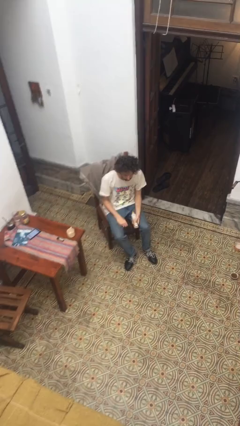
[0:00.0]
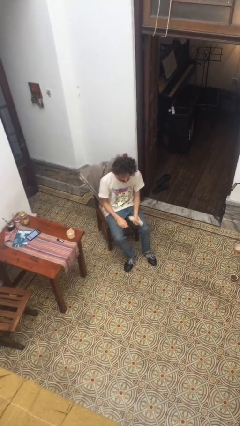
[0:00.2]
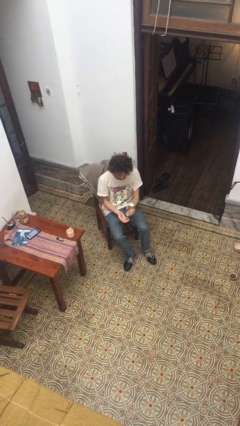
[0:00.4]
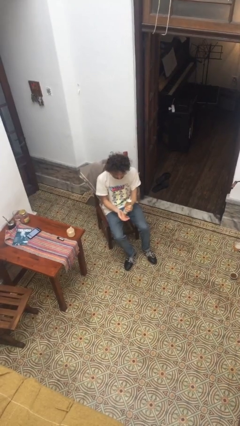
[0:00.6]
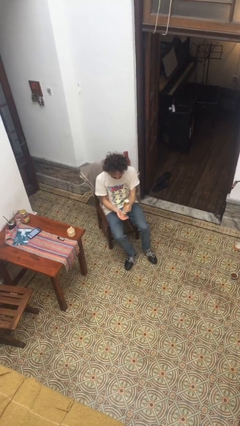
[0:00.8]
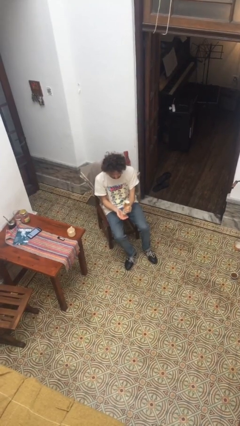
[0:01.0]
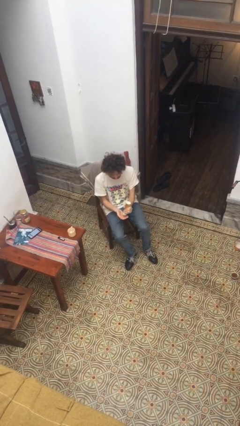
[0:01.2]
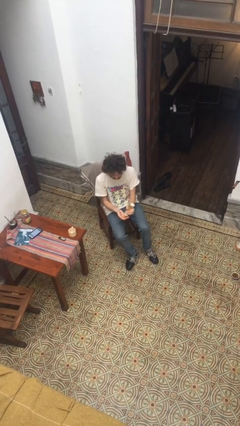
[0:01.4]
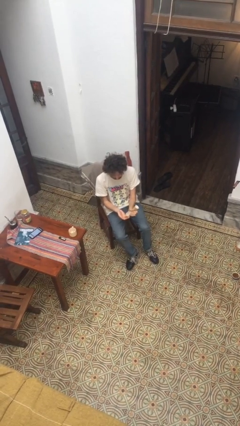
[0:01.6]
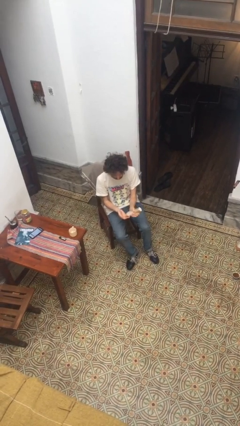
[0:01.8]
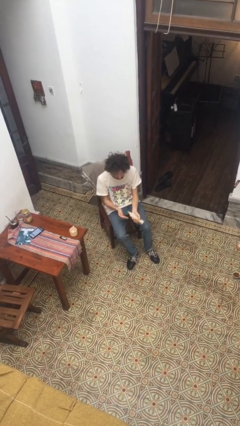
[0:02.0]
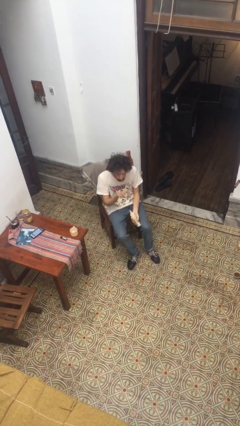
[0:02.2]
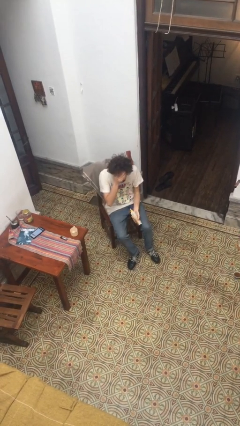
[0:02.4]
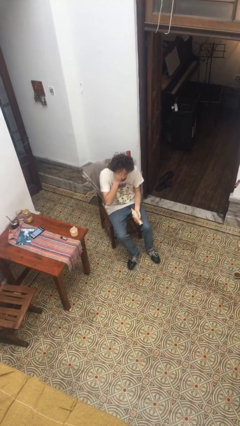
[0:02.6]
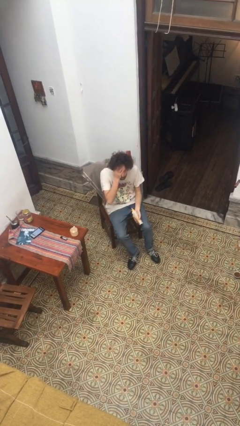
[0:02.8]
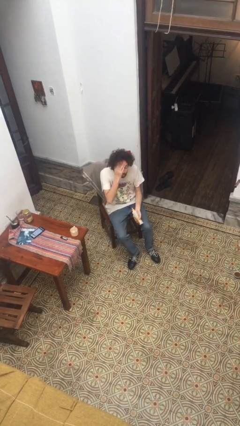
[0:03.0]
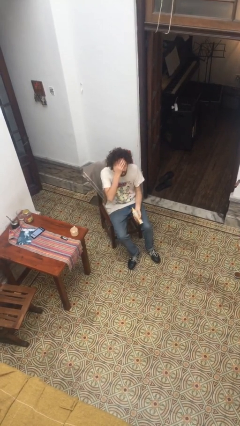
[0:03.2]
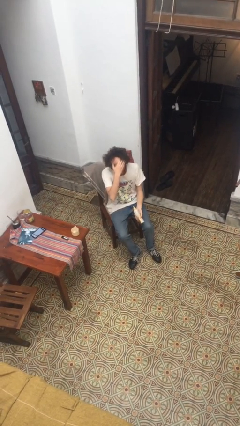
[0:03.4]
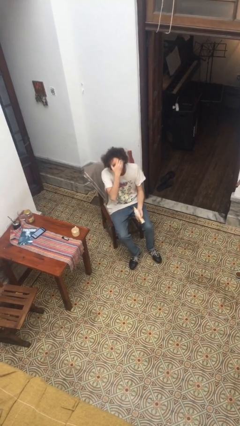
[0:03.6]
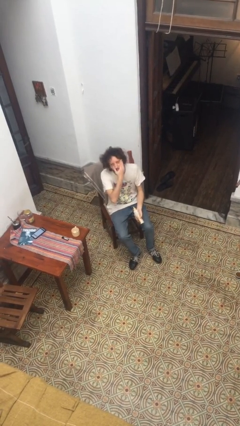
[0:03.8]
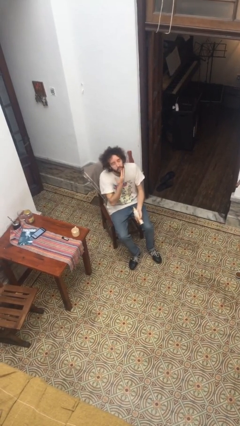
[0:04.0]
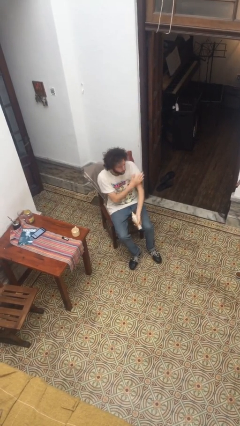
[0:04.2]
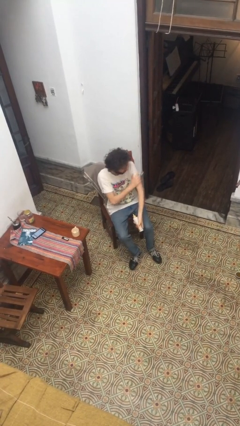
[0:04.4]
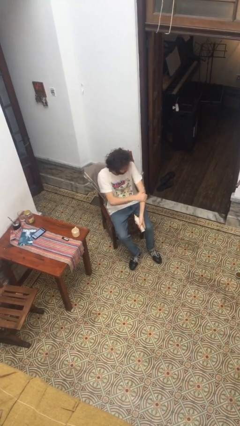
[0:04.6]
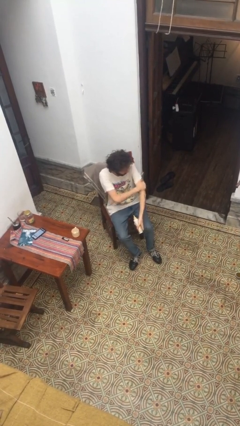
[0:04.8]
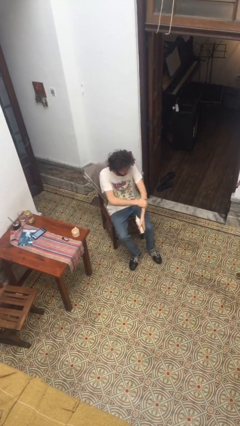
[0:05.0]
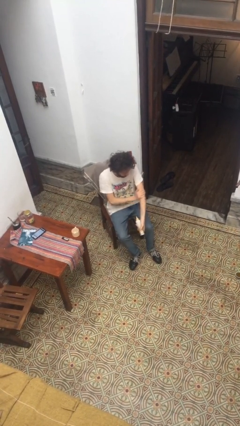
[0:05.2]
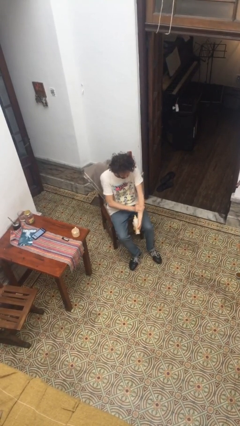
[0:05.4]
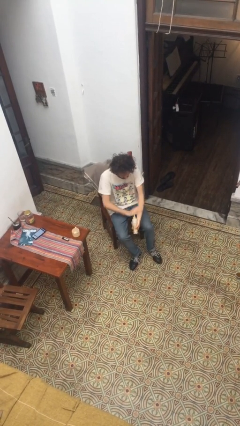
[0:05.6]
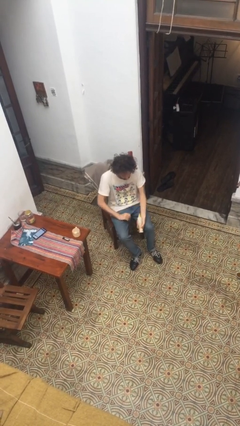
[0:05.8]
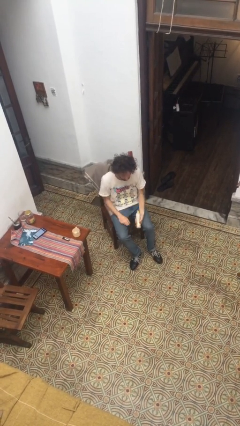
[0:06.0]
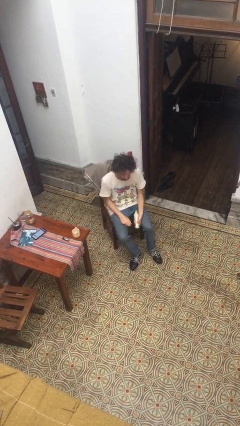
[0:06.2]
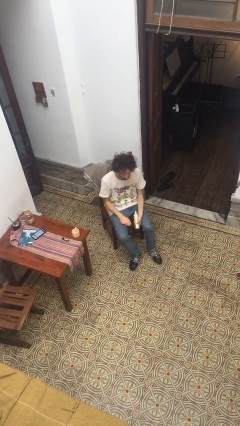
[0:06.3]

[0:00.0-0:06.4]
person applies sunscreen

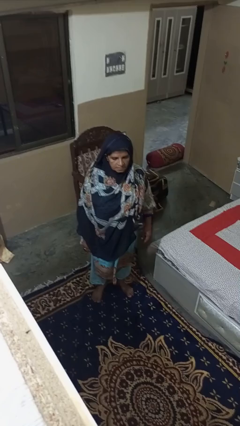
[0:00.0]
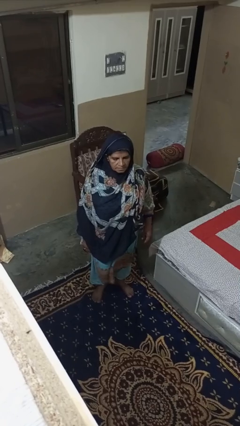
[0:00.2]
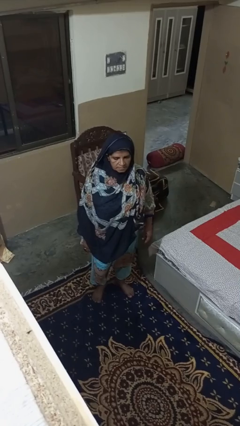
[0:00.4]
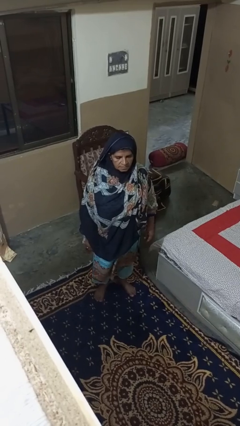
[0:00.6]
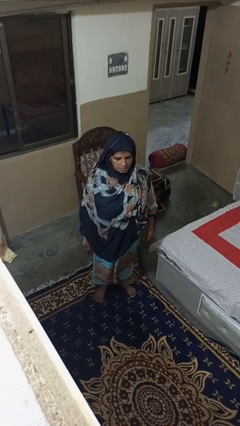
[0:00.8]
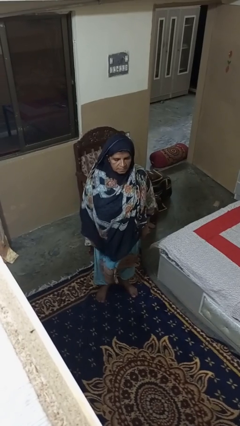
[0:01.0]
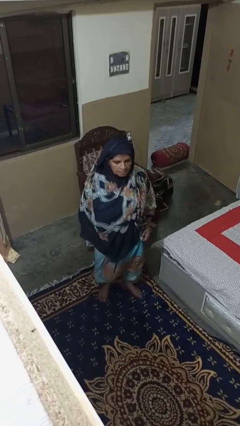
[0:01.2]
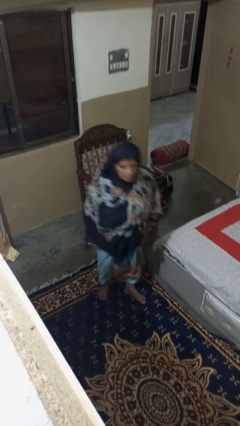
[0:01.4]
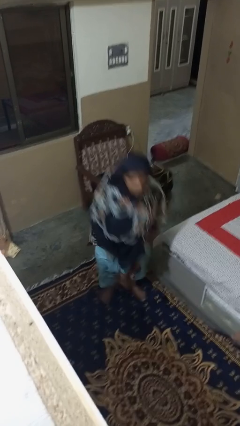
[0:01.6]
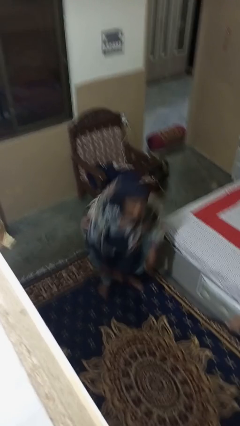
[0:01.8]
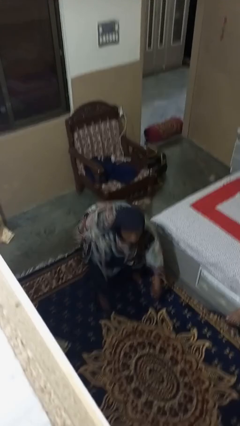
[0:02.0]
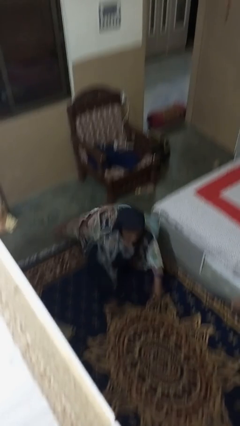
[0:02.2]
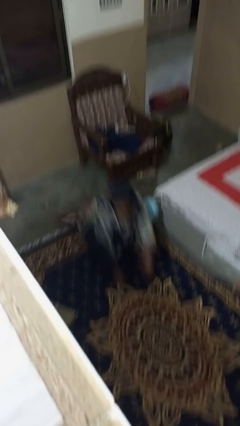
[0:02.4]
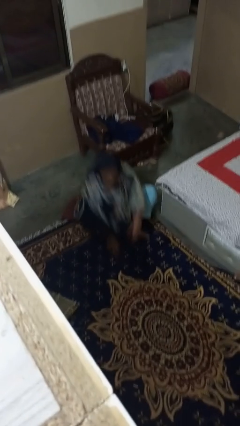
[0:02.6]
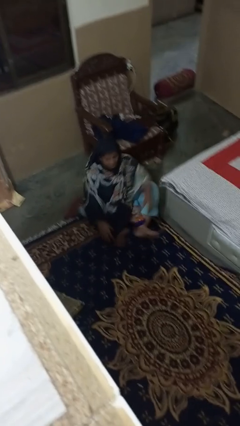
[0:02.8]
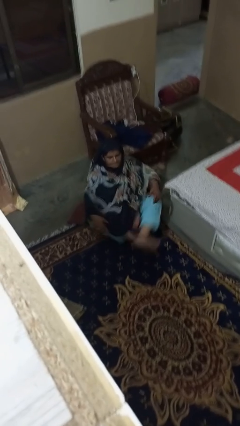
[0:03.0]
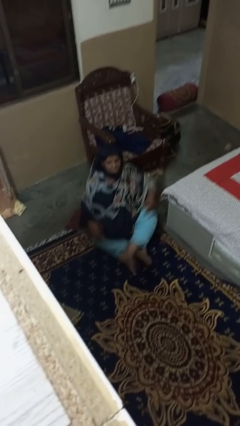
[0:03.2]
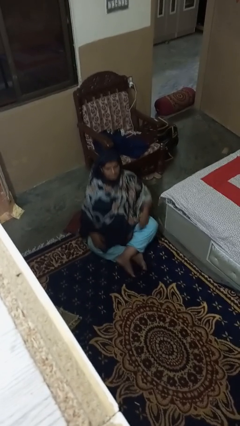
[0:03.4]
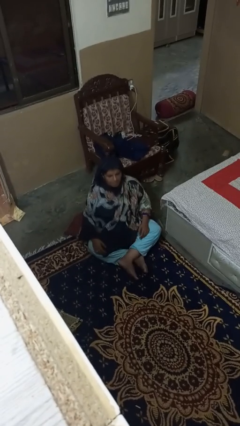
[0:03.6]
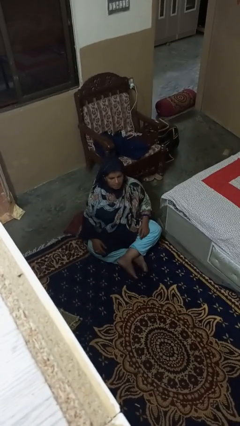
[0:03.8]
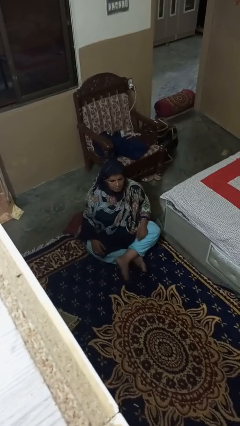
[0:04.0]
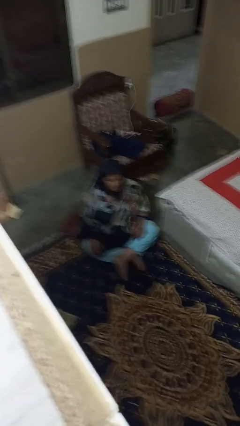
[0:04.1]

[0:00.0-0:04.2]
person sits crisscross

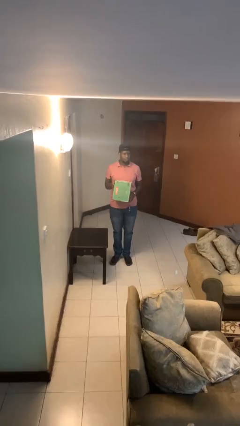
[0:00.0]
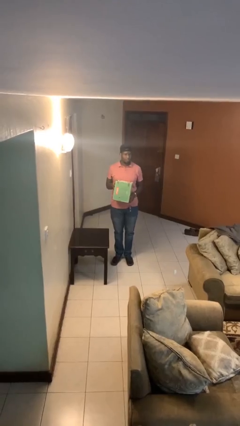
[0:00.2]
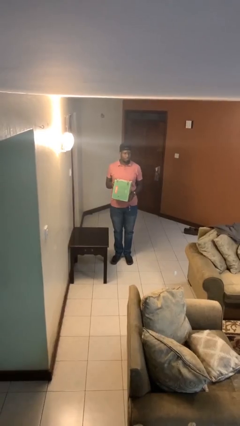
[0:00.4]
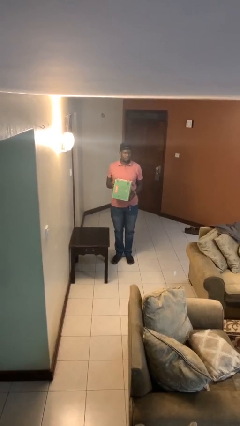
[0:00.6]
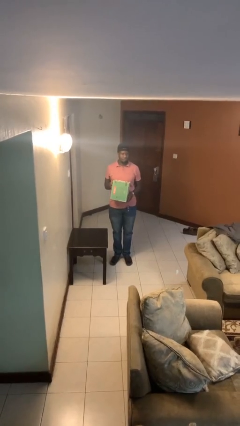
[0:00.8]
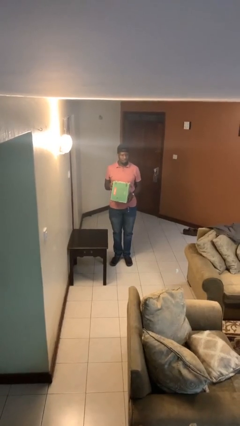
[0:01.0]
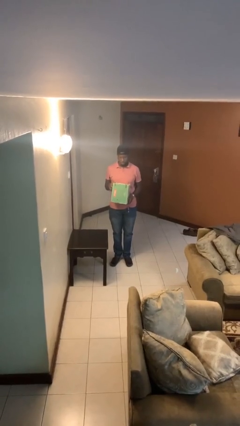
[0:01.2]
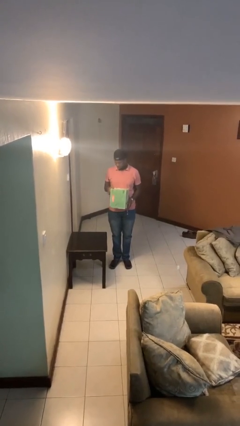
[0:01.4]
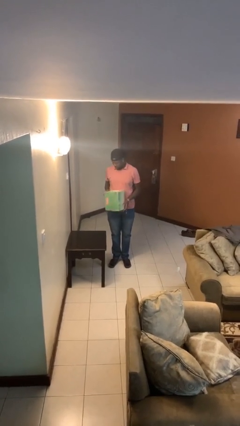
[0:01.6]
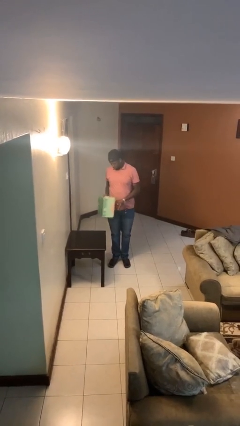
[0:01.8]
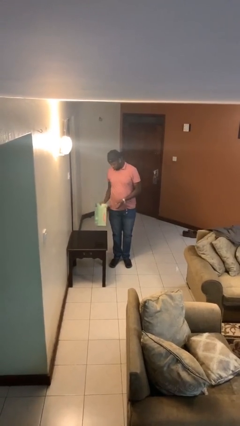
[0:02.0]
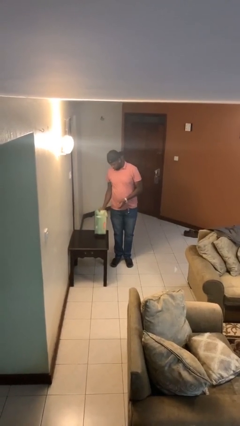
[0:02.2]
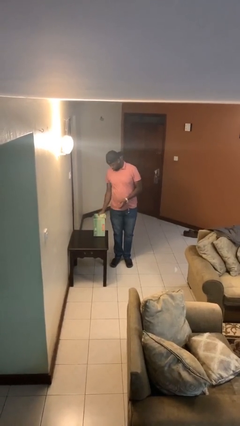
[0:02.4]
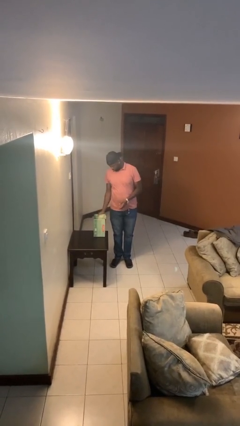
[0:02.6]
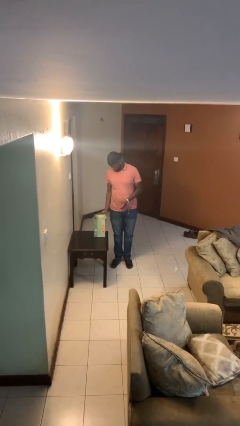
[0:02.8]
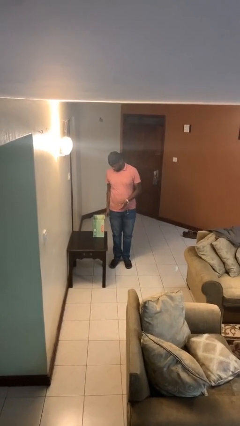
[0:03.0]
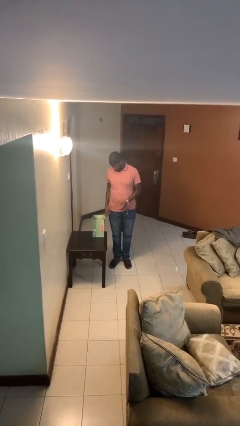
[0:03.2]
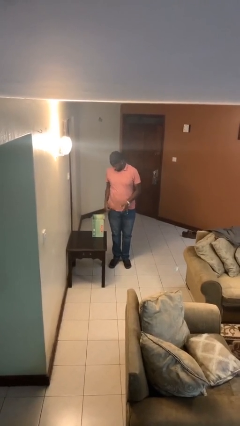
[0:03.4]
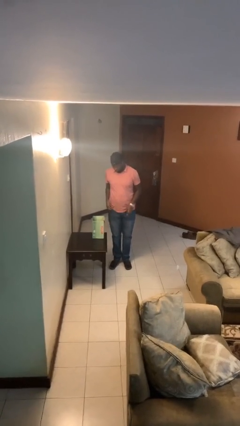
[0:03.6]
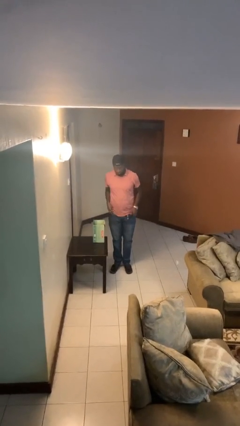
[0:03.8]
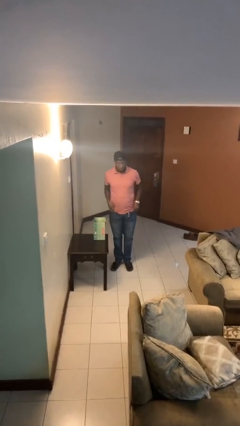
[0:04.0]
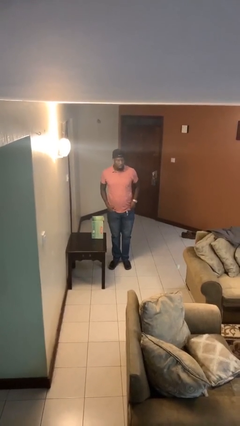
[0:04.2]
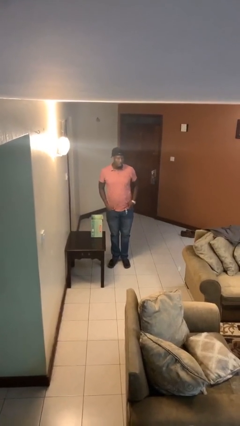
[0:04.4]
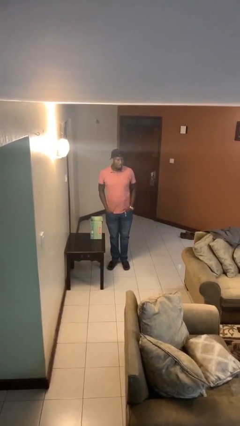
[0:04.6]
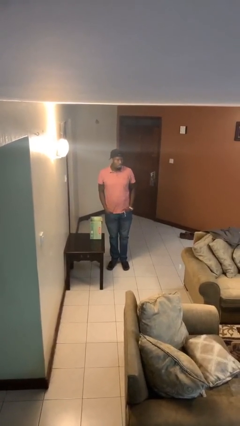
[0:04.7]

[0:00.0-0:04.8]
person puts down object on table

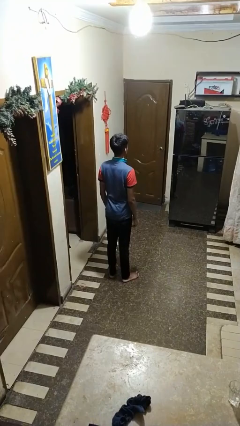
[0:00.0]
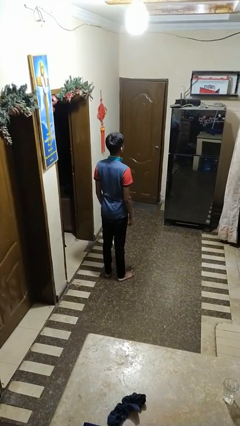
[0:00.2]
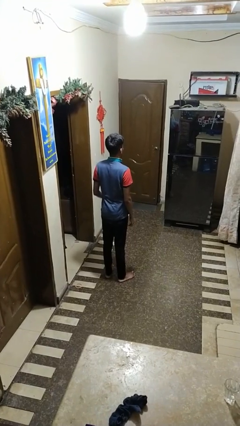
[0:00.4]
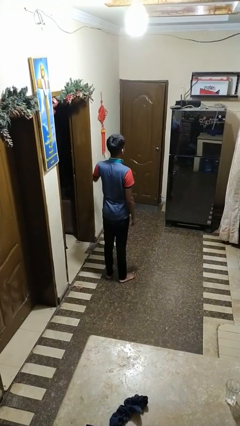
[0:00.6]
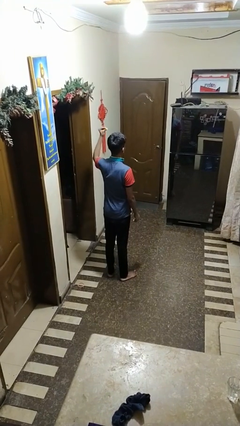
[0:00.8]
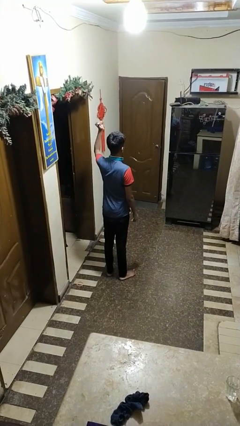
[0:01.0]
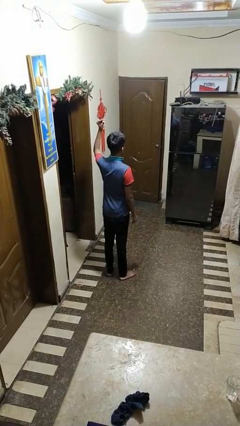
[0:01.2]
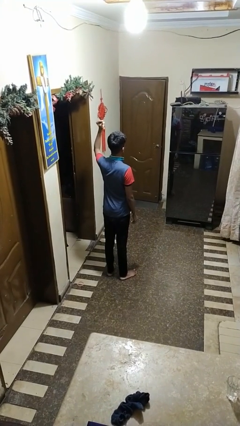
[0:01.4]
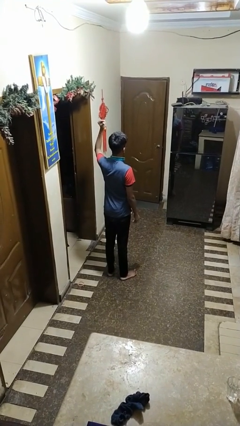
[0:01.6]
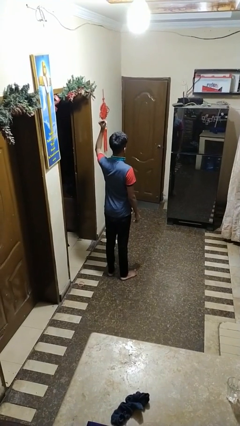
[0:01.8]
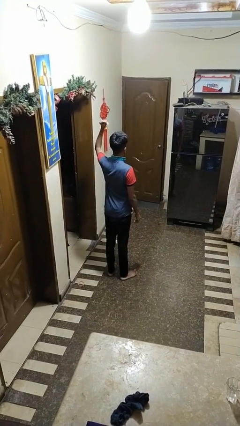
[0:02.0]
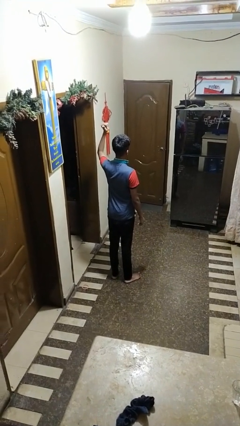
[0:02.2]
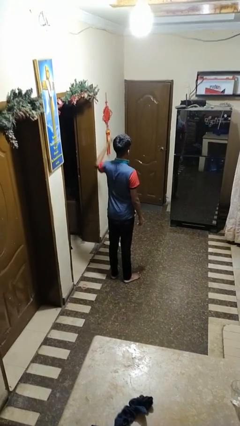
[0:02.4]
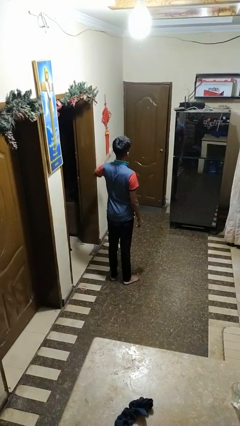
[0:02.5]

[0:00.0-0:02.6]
person snaps fingers
